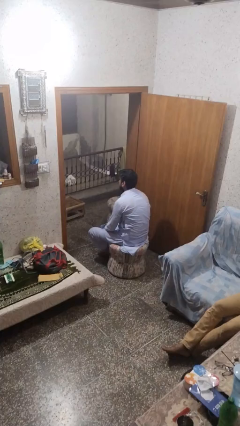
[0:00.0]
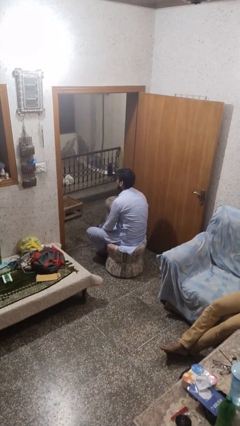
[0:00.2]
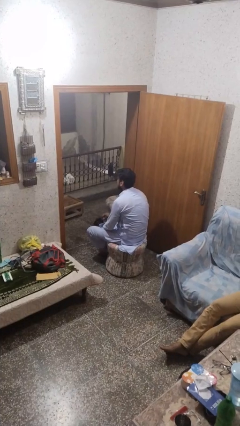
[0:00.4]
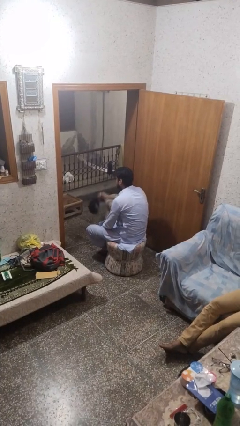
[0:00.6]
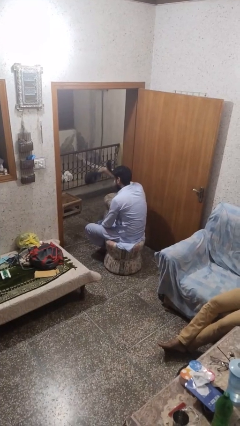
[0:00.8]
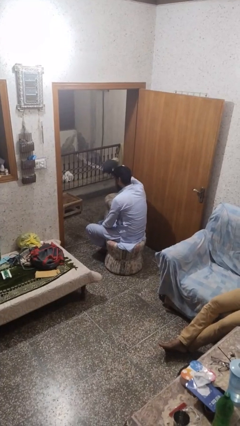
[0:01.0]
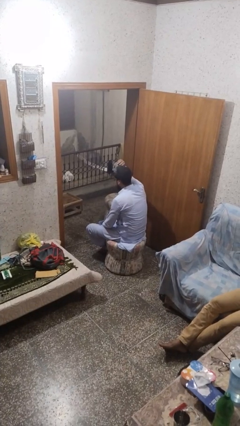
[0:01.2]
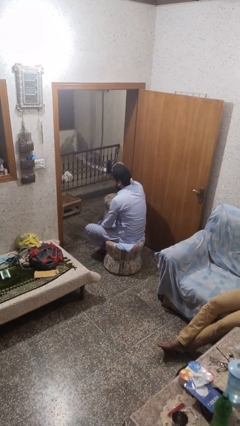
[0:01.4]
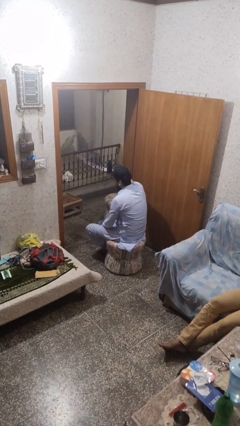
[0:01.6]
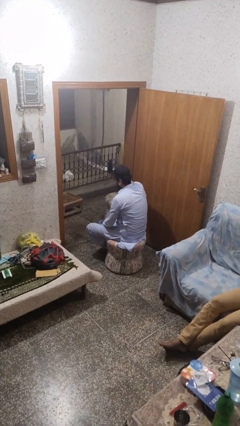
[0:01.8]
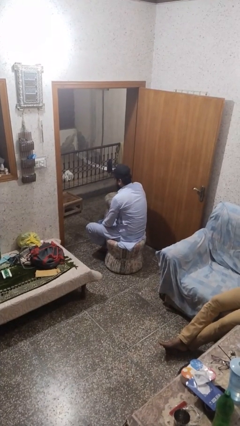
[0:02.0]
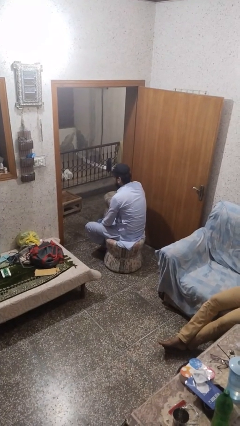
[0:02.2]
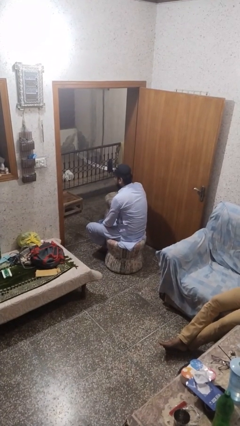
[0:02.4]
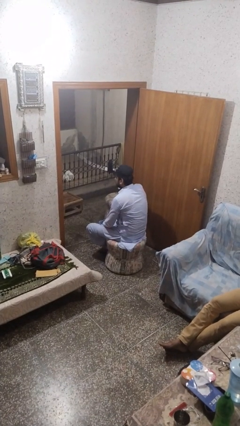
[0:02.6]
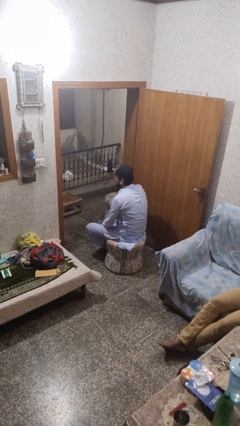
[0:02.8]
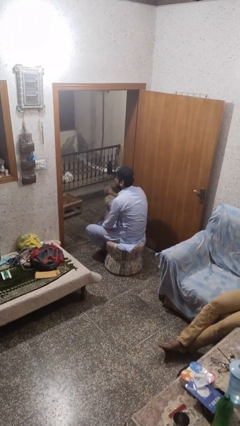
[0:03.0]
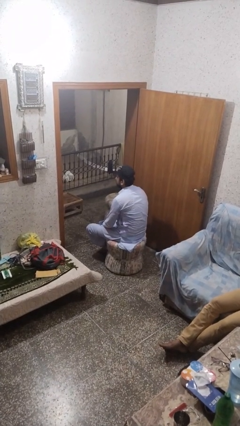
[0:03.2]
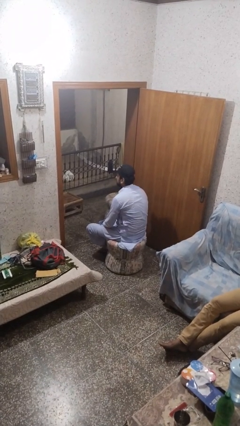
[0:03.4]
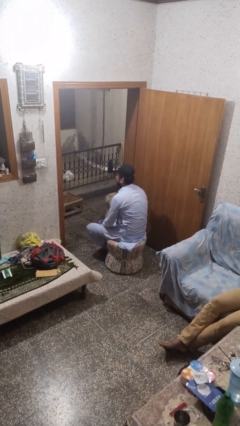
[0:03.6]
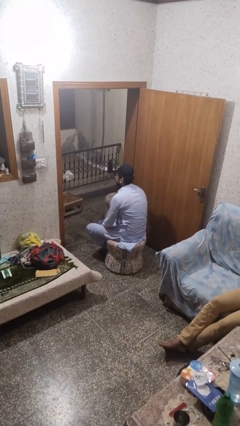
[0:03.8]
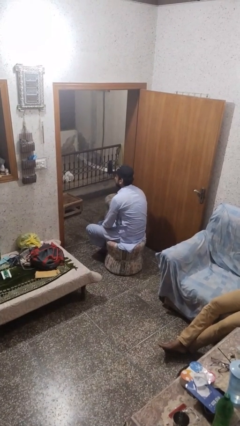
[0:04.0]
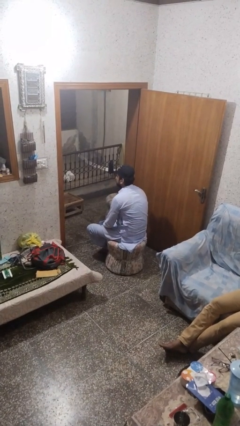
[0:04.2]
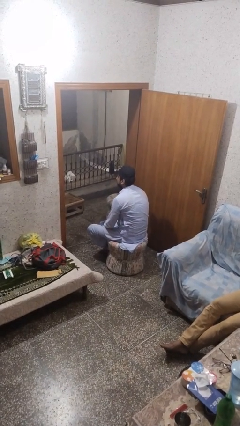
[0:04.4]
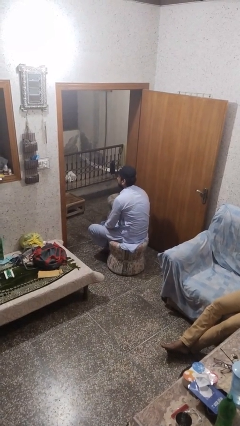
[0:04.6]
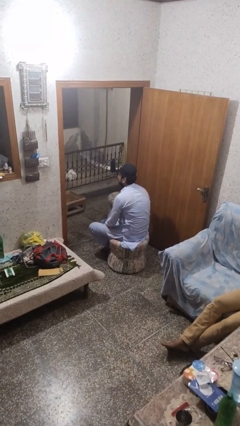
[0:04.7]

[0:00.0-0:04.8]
person puts on hat

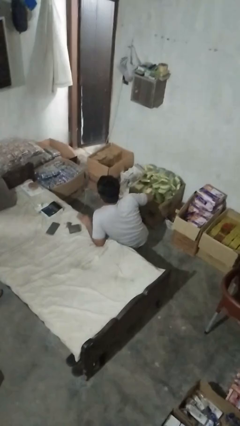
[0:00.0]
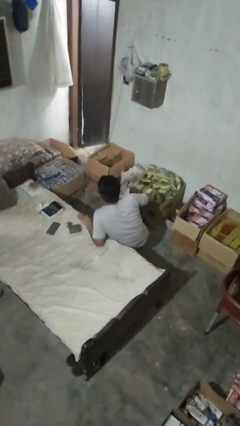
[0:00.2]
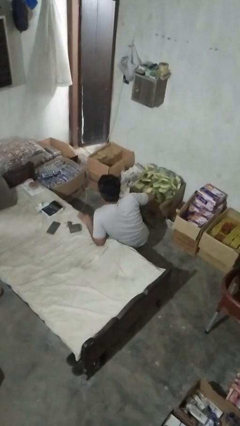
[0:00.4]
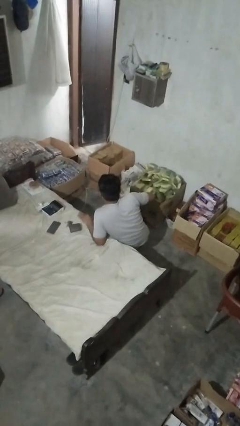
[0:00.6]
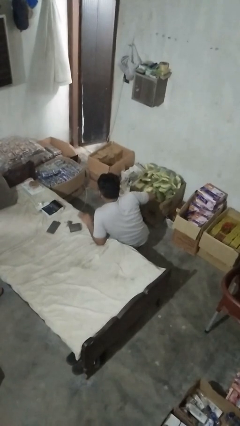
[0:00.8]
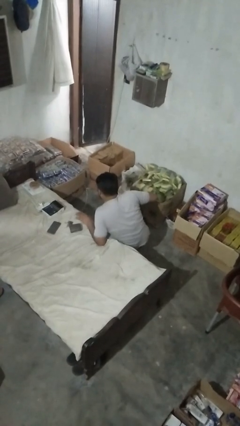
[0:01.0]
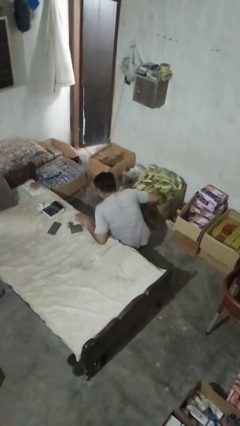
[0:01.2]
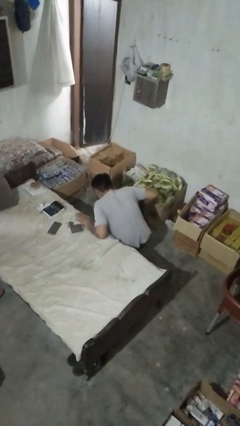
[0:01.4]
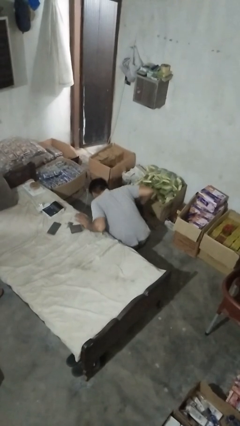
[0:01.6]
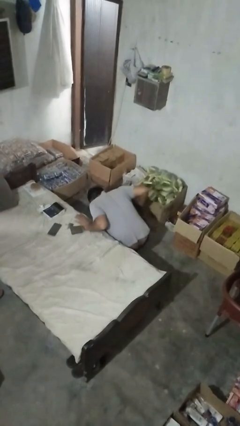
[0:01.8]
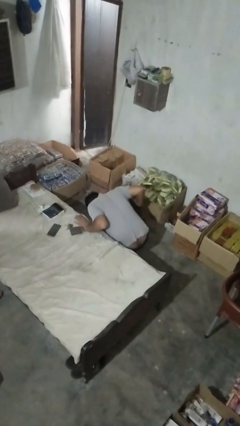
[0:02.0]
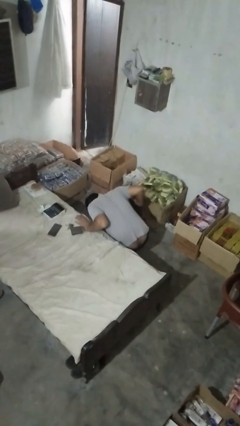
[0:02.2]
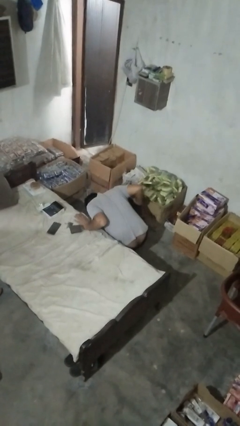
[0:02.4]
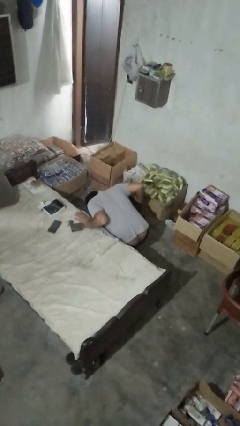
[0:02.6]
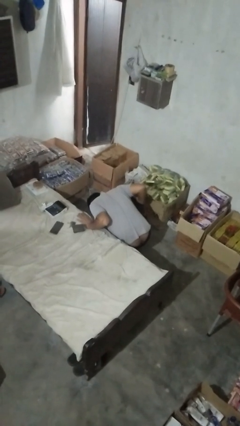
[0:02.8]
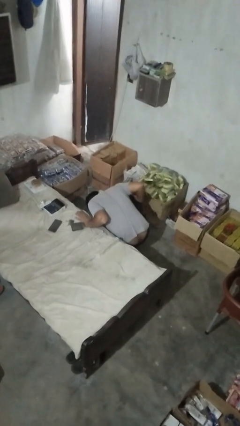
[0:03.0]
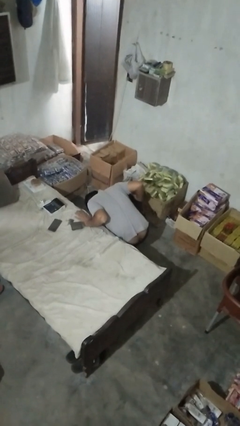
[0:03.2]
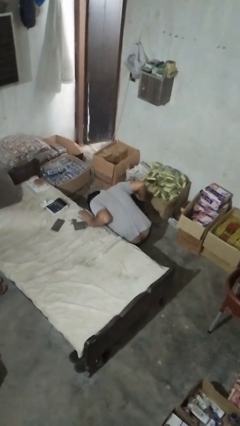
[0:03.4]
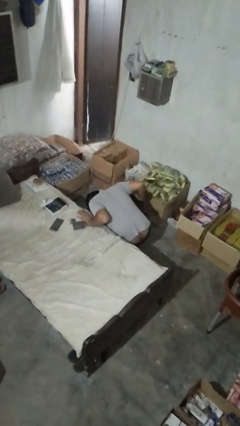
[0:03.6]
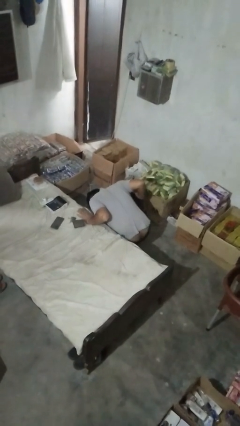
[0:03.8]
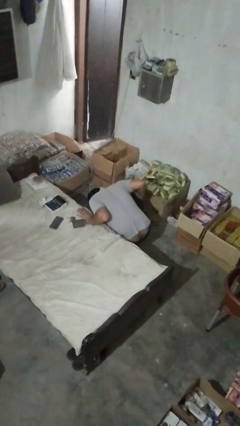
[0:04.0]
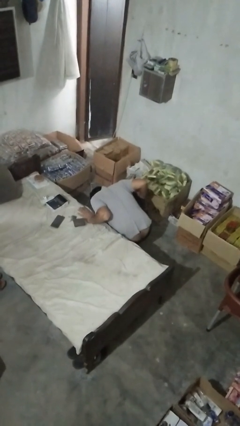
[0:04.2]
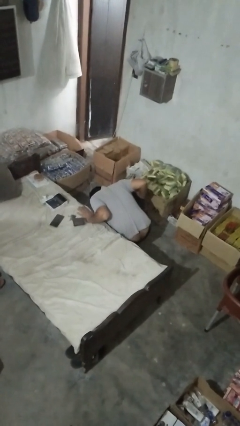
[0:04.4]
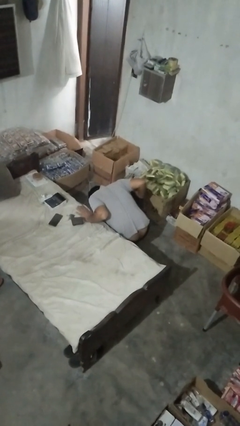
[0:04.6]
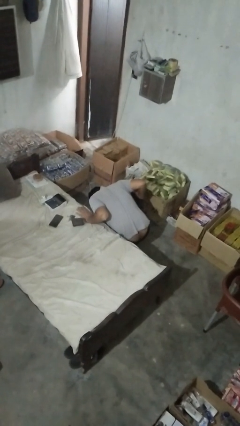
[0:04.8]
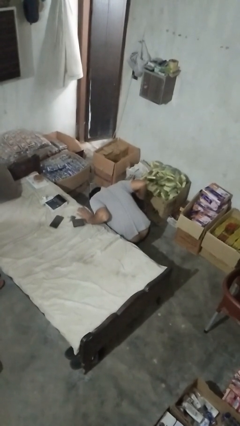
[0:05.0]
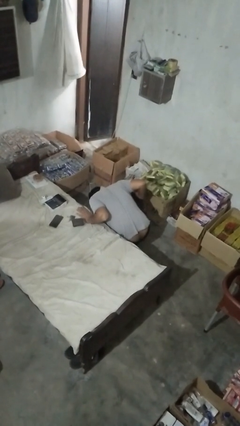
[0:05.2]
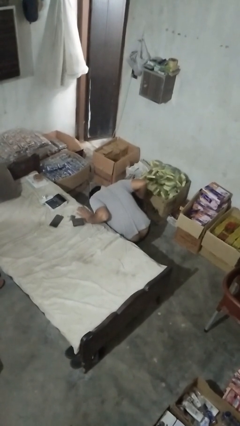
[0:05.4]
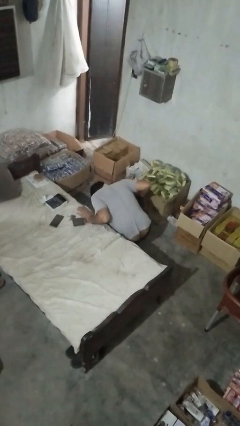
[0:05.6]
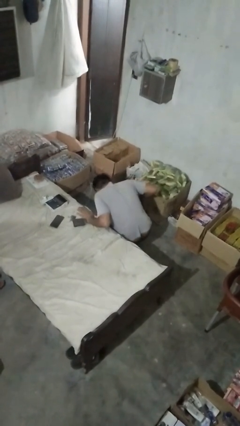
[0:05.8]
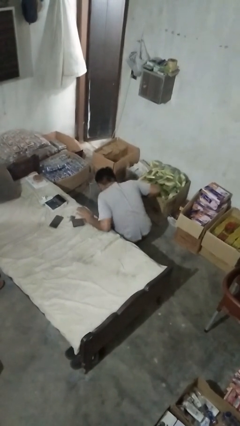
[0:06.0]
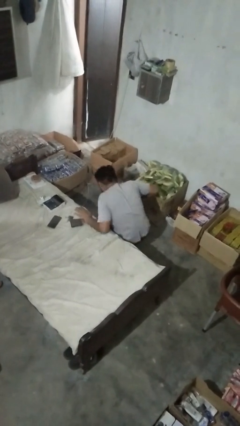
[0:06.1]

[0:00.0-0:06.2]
person searches under couch

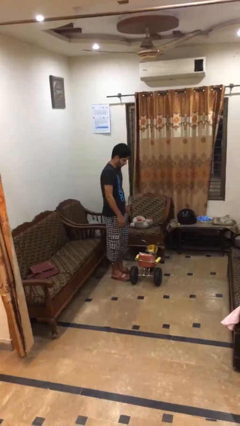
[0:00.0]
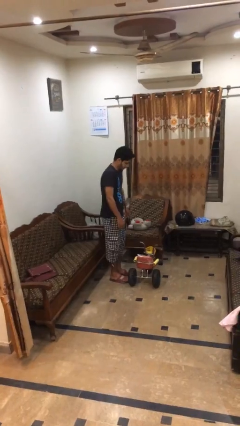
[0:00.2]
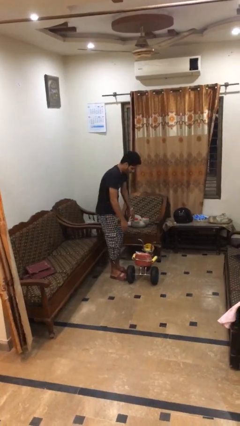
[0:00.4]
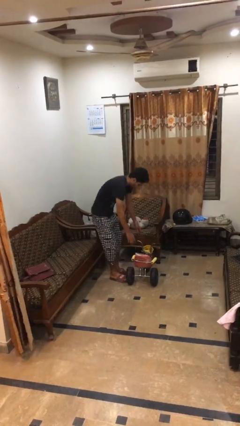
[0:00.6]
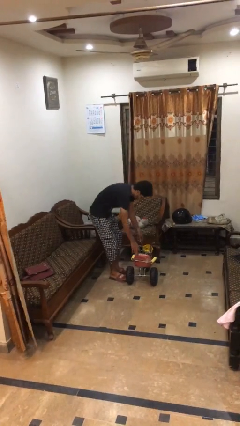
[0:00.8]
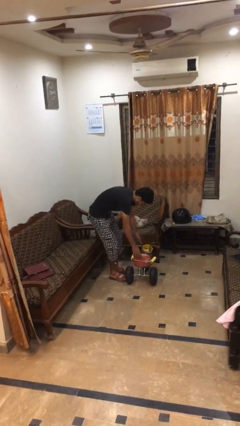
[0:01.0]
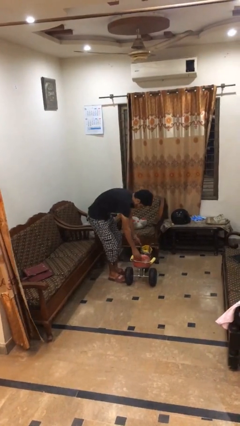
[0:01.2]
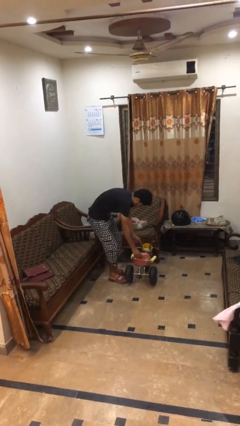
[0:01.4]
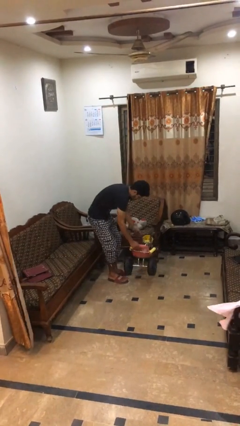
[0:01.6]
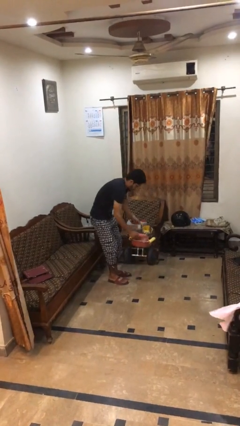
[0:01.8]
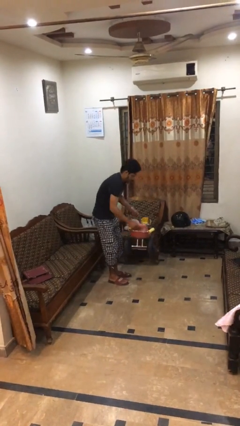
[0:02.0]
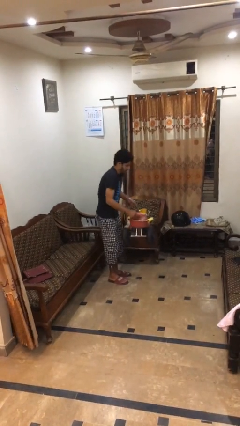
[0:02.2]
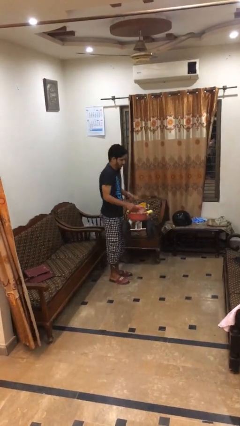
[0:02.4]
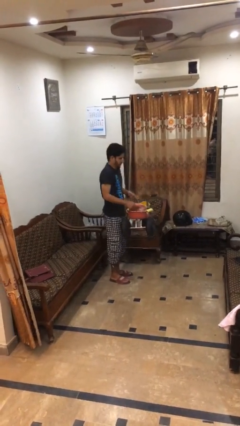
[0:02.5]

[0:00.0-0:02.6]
person picks up object from floor

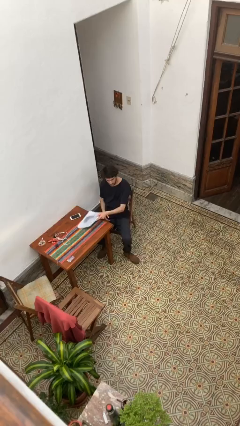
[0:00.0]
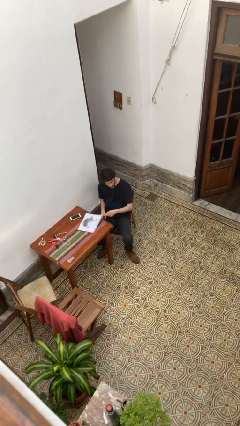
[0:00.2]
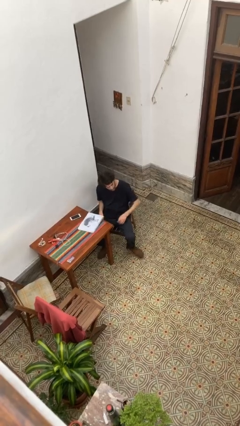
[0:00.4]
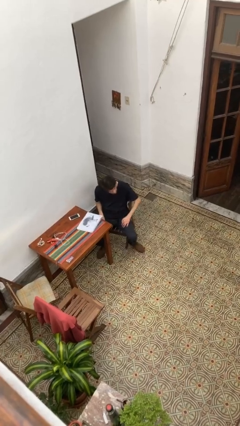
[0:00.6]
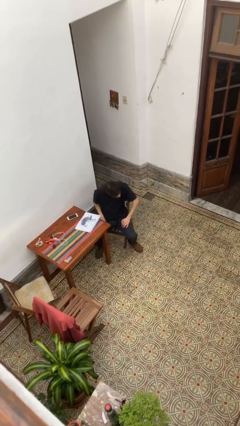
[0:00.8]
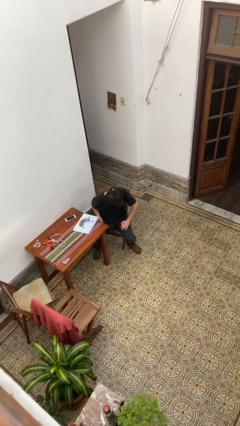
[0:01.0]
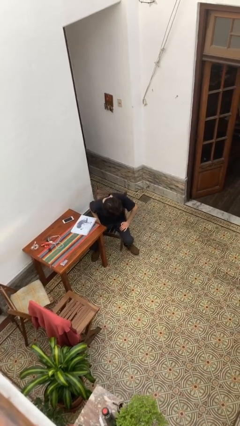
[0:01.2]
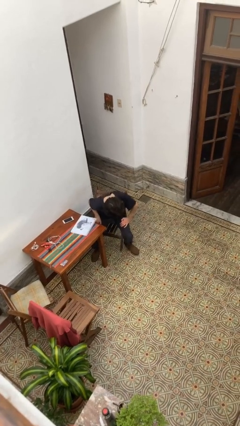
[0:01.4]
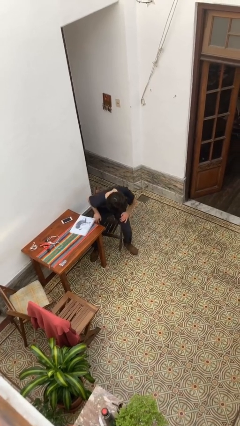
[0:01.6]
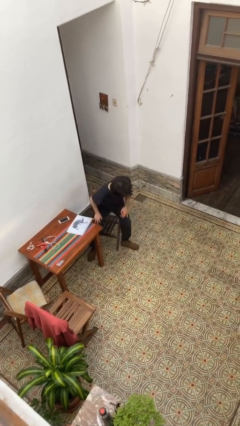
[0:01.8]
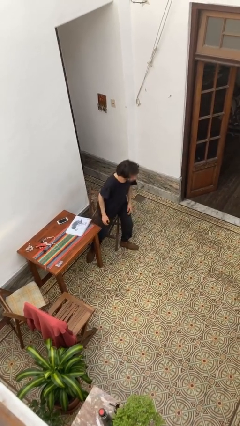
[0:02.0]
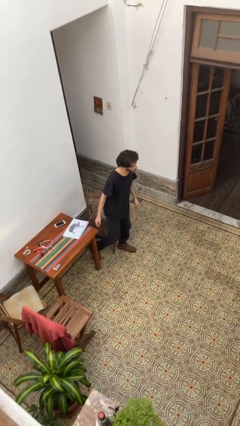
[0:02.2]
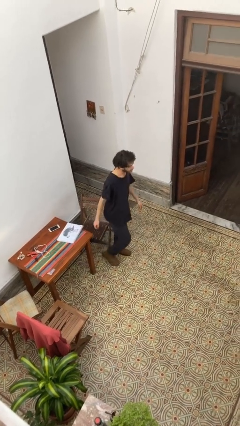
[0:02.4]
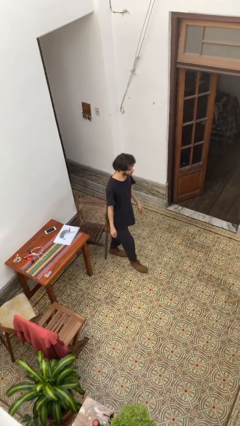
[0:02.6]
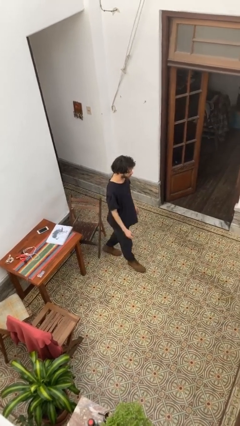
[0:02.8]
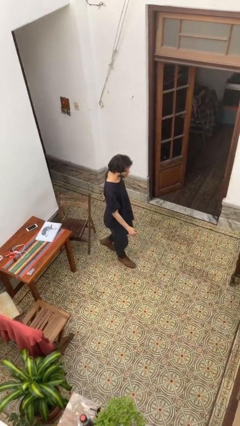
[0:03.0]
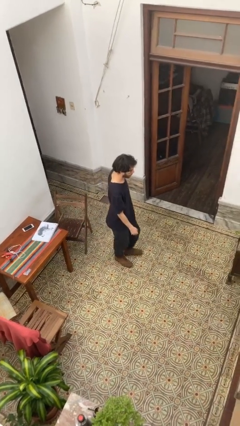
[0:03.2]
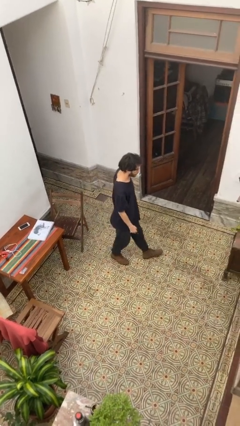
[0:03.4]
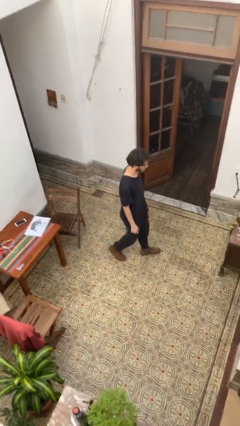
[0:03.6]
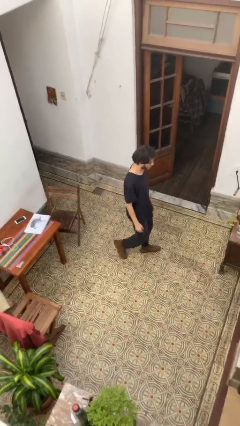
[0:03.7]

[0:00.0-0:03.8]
person stands up

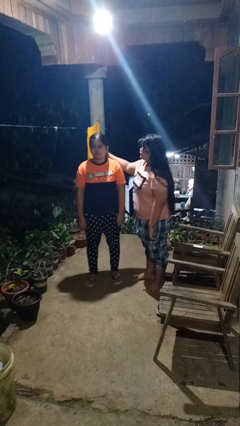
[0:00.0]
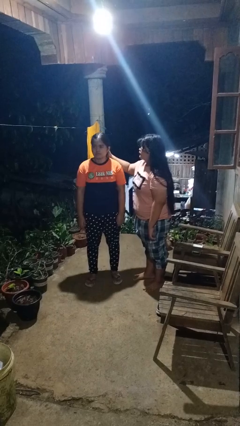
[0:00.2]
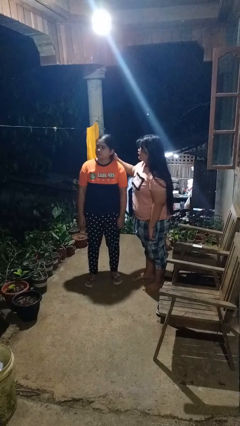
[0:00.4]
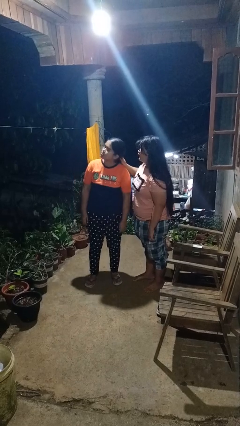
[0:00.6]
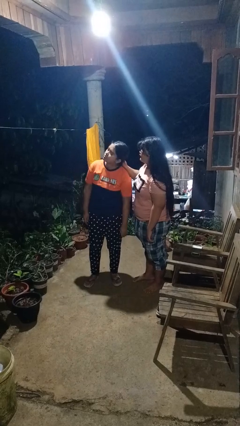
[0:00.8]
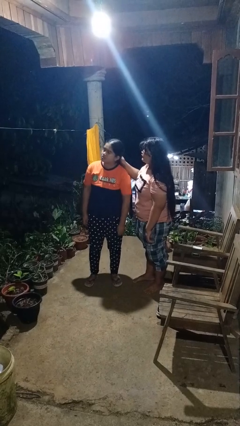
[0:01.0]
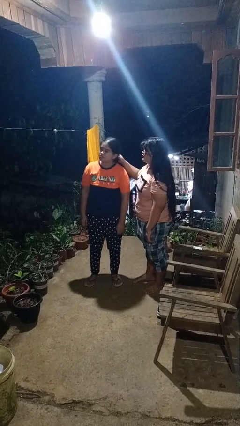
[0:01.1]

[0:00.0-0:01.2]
person grabs person by hair
